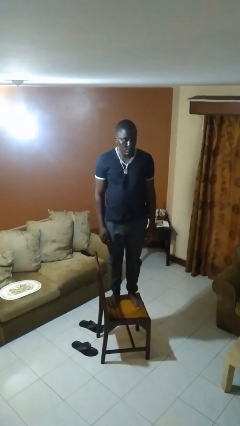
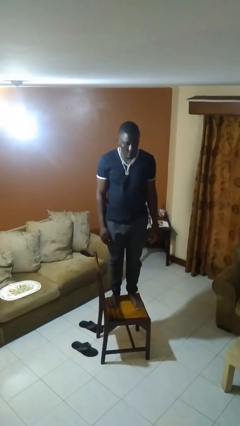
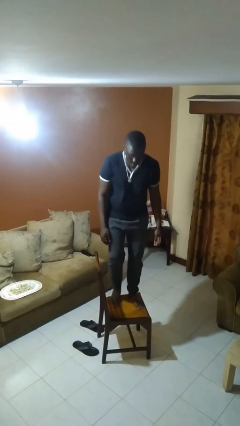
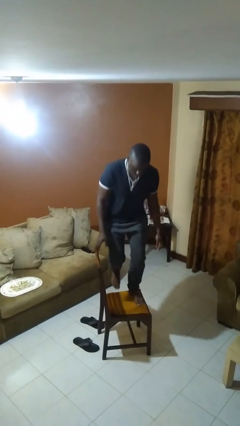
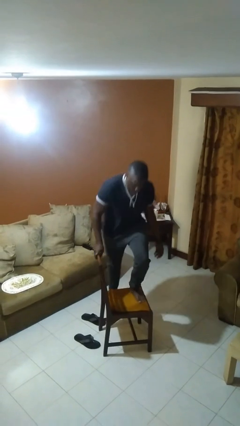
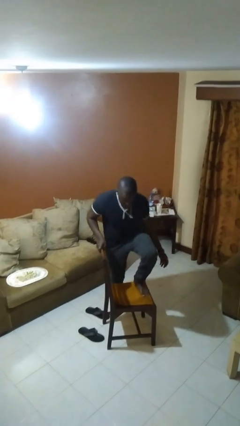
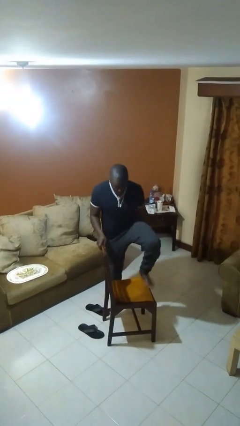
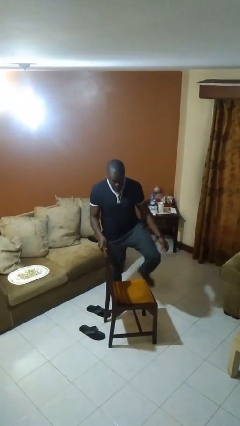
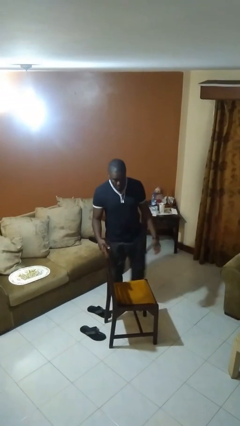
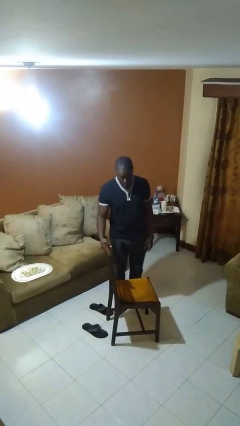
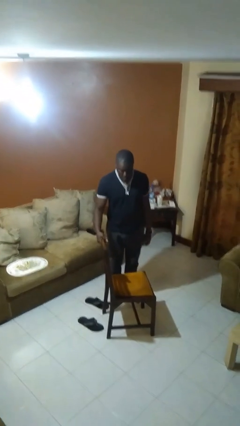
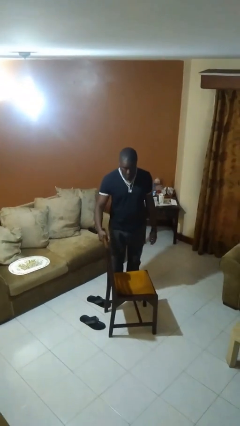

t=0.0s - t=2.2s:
person climbs off chair

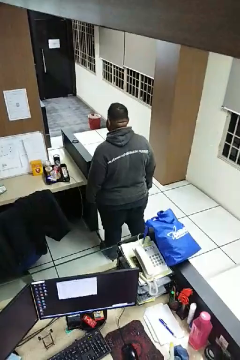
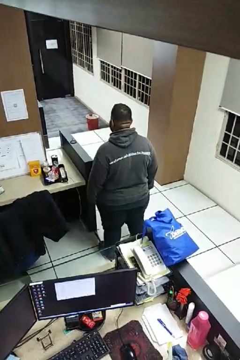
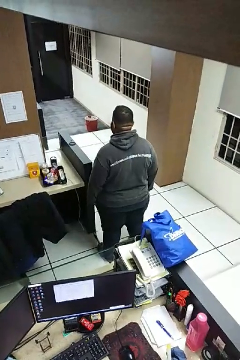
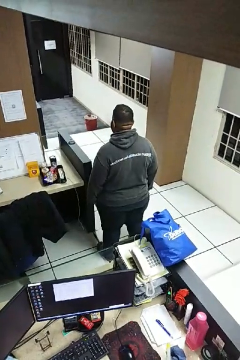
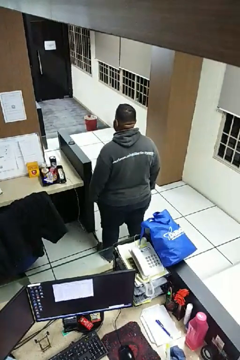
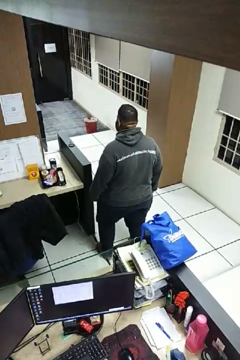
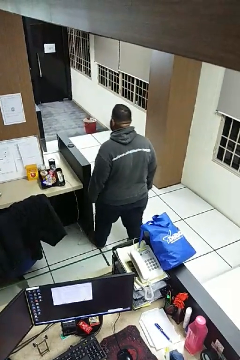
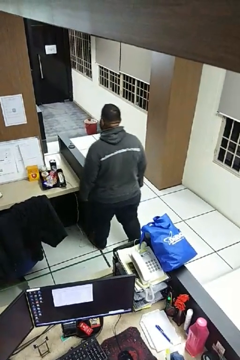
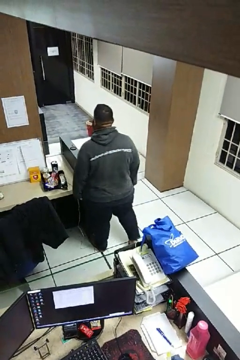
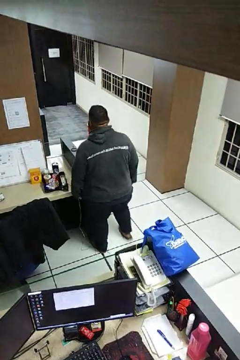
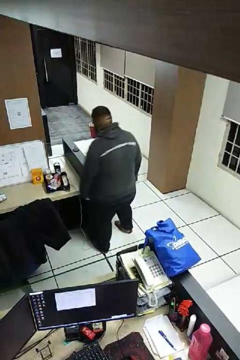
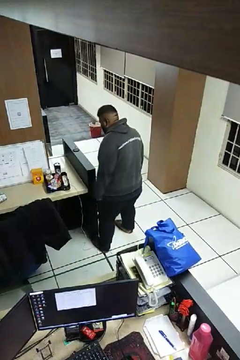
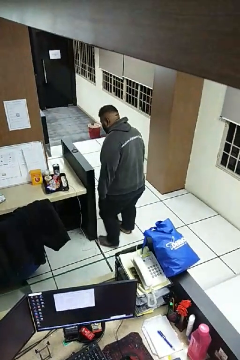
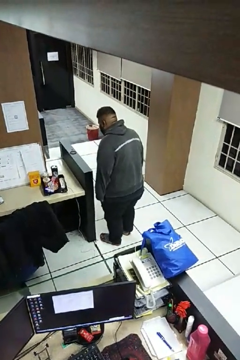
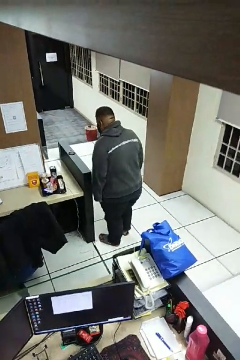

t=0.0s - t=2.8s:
person bumps into table

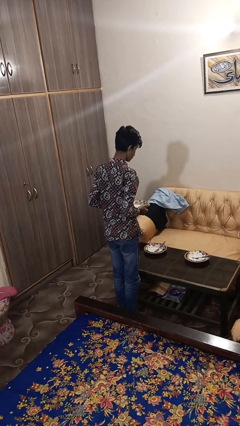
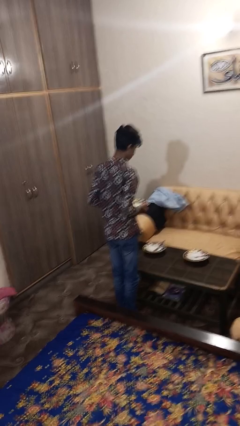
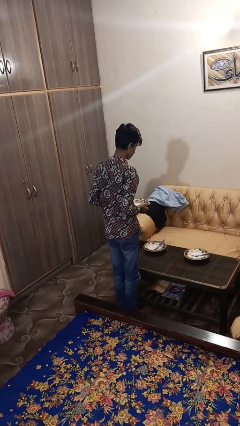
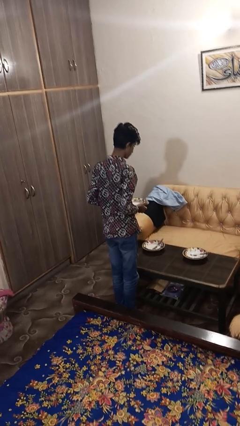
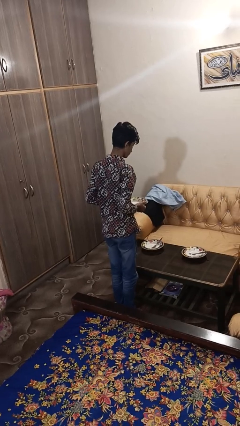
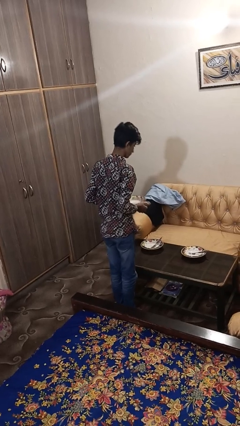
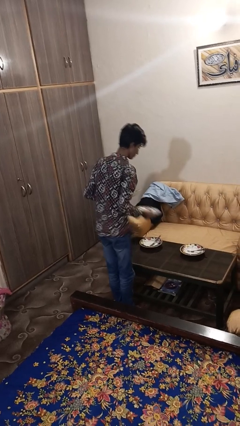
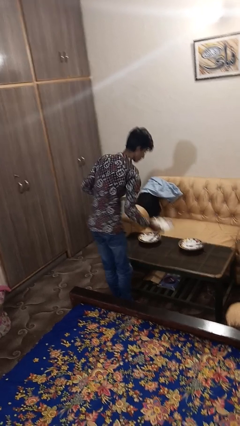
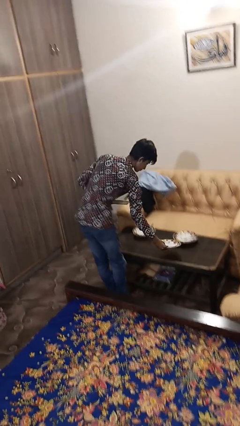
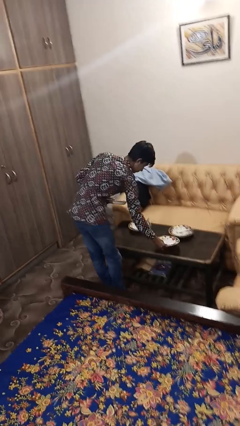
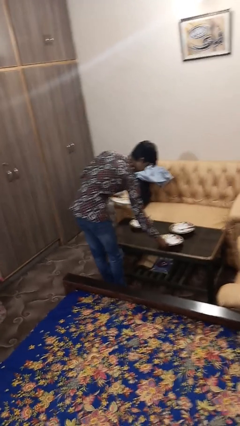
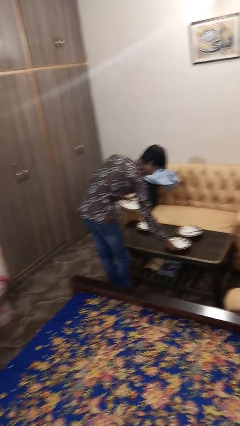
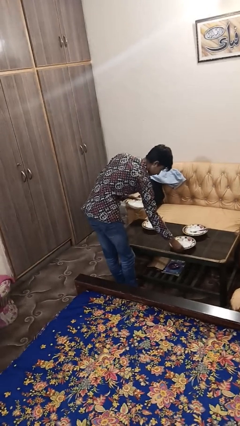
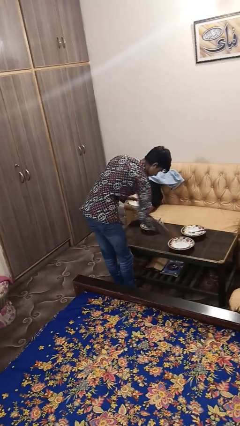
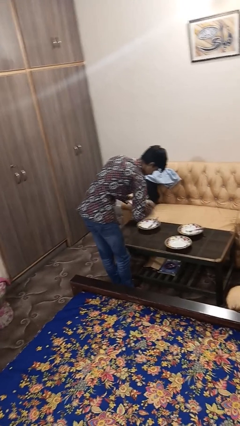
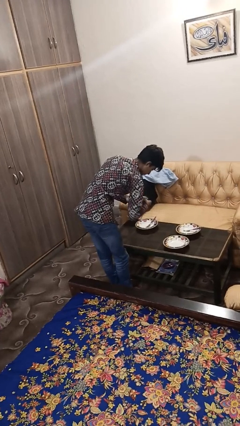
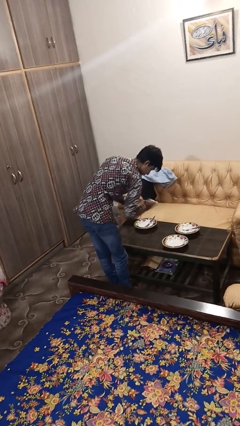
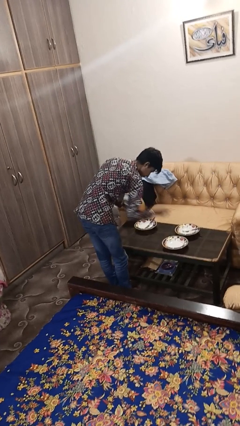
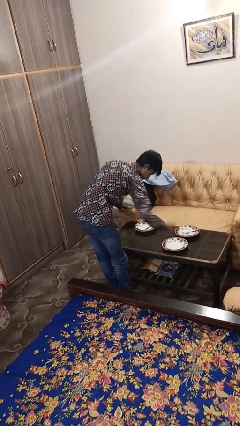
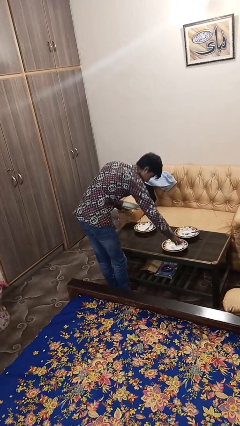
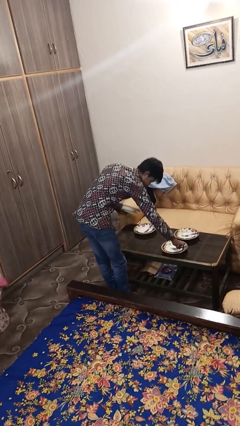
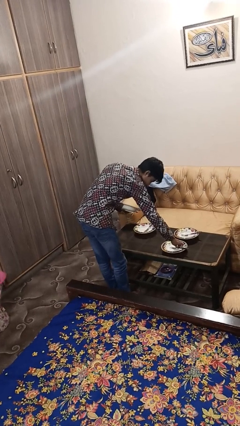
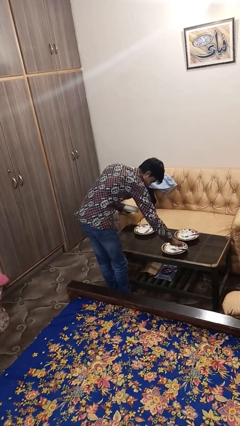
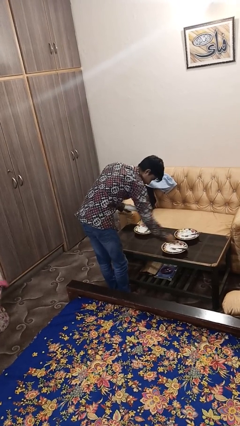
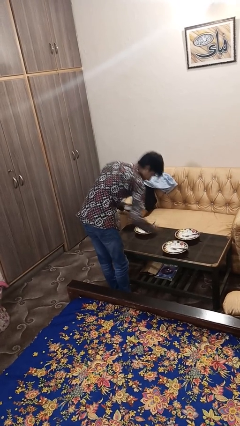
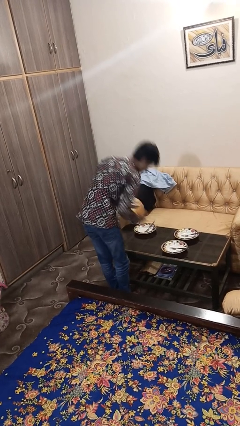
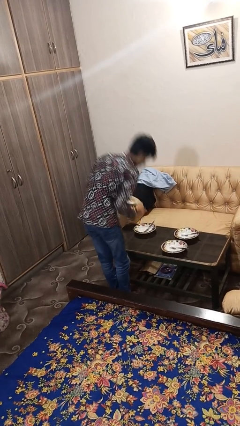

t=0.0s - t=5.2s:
person sets table

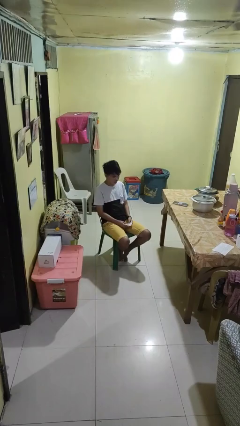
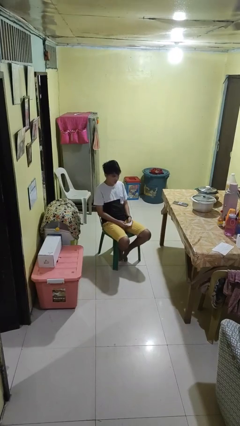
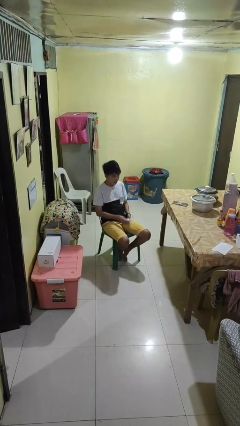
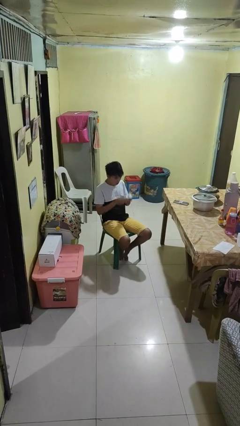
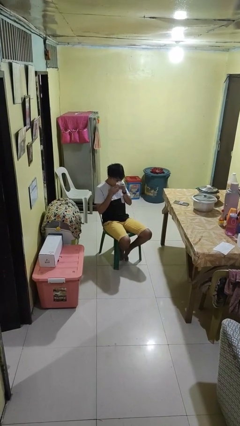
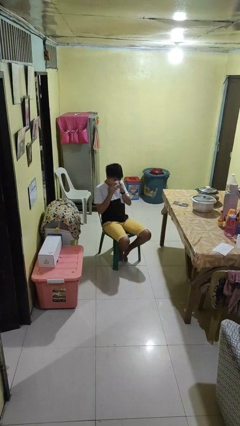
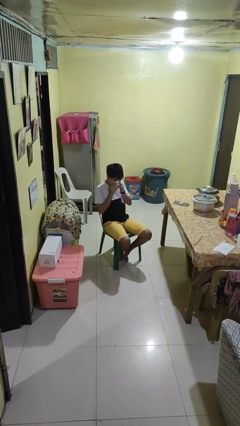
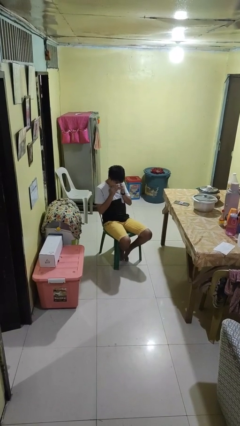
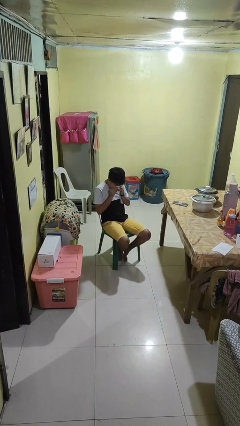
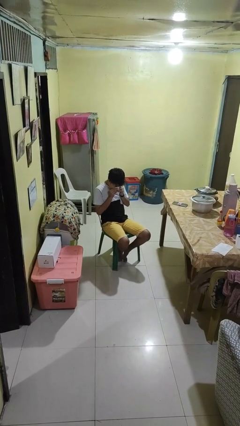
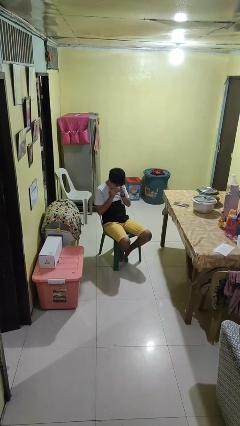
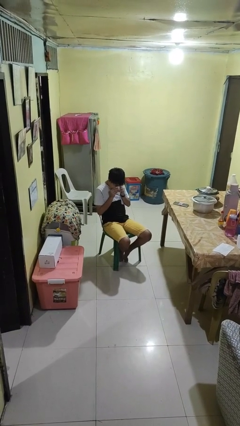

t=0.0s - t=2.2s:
person blows nose

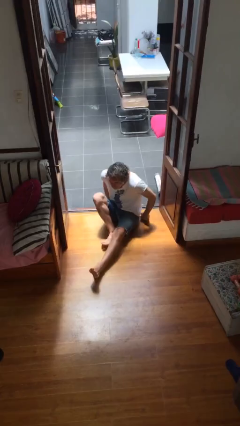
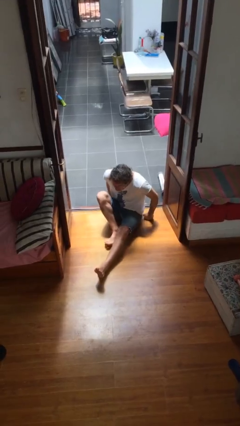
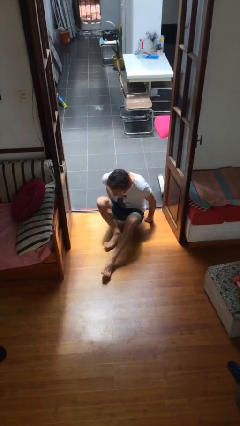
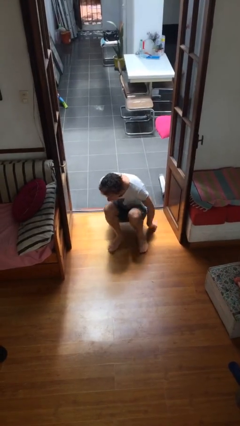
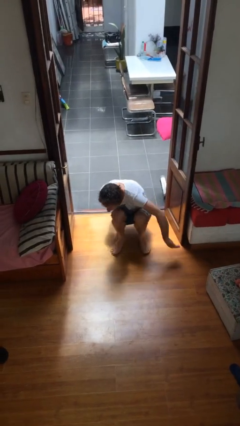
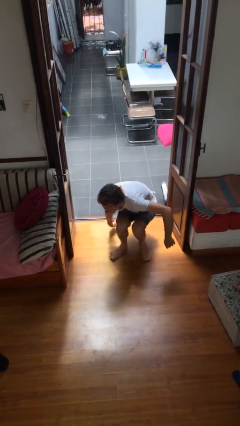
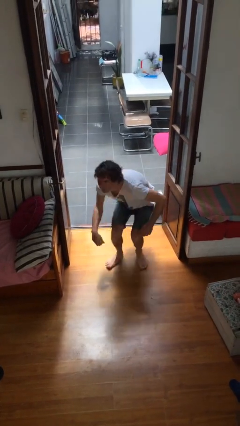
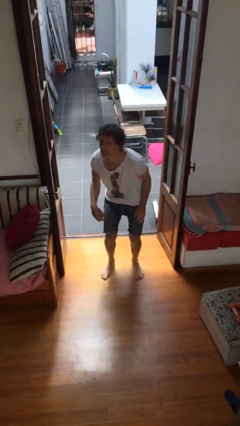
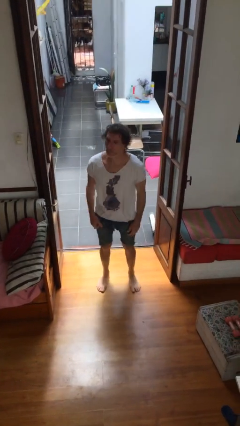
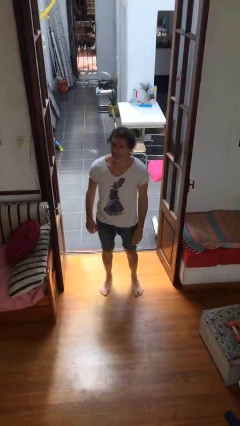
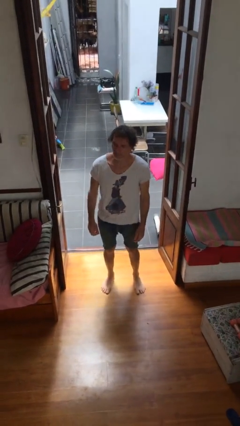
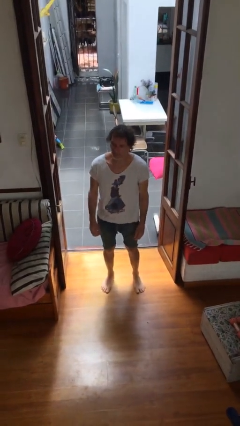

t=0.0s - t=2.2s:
person stands up

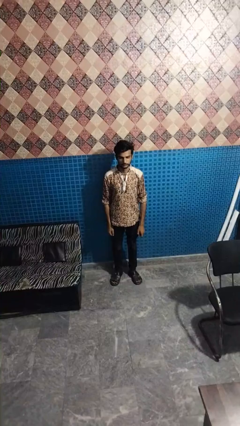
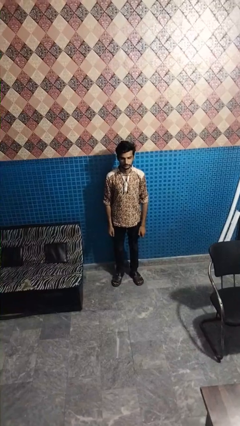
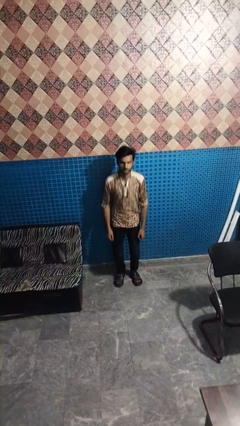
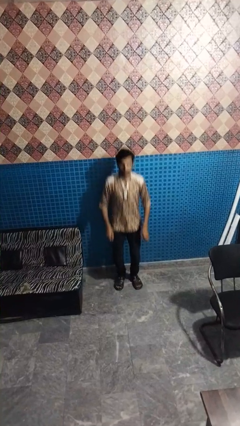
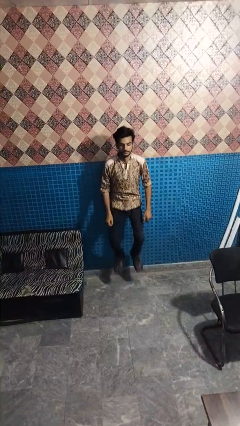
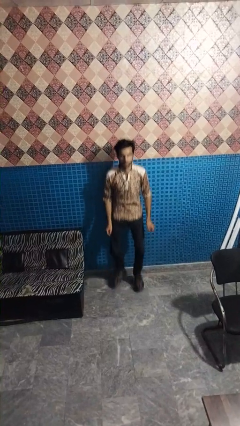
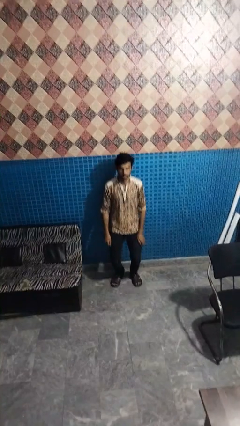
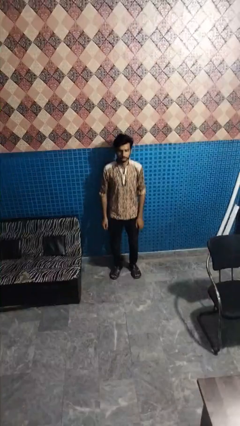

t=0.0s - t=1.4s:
person jumps

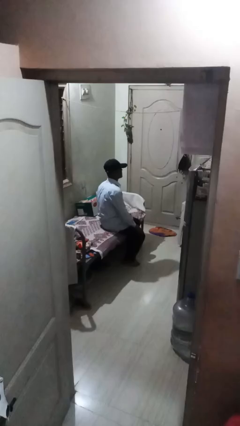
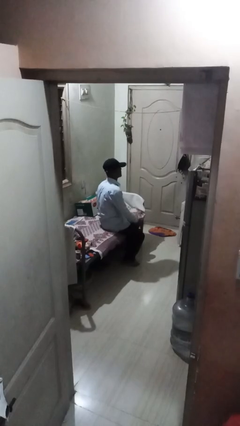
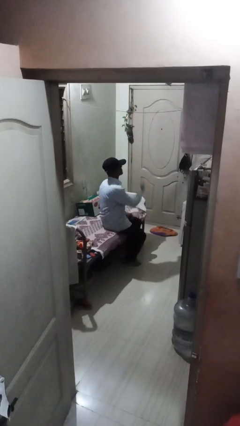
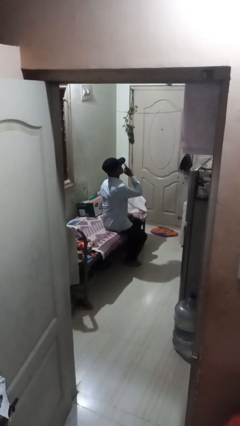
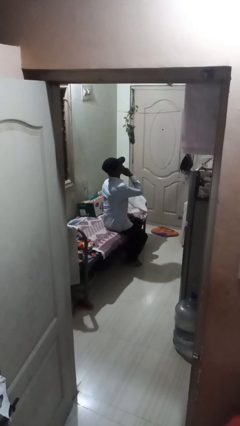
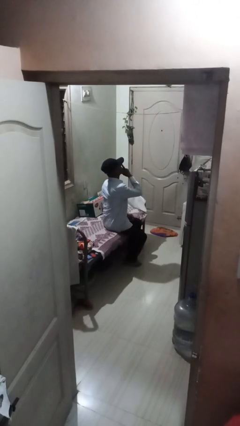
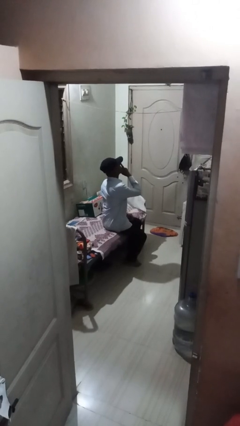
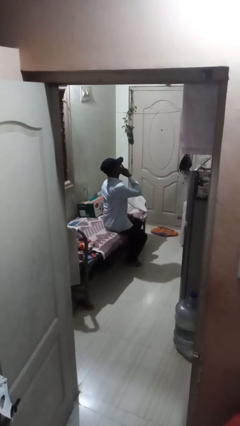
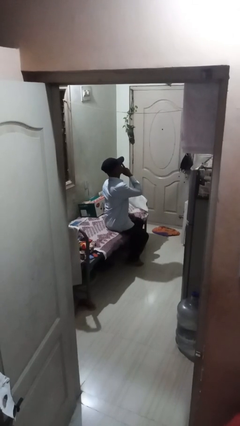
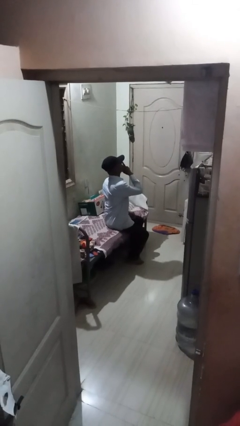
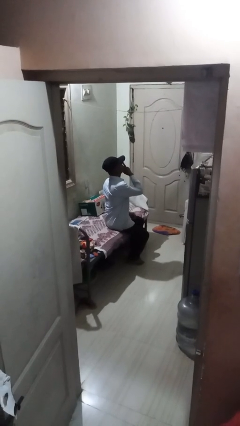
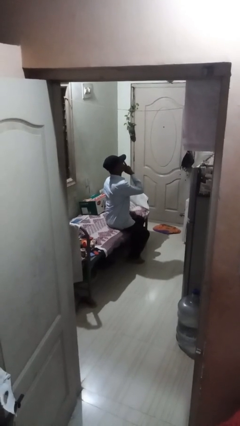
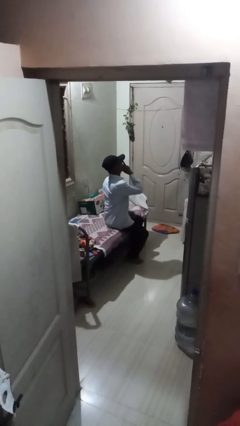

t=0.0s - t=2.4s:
person gestures be quiet
